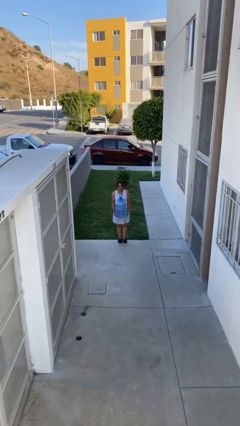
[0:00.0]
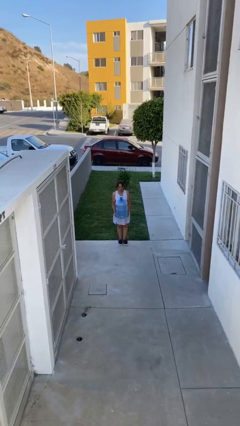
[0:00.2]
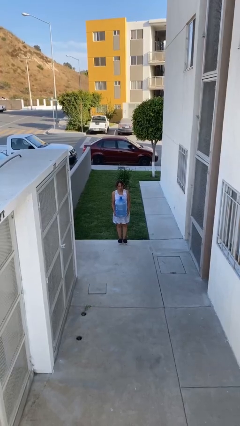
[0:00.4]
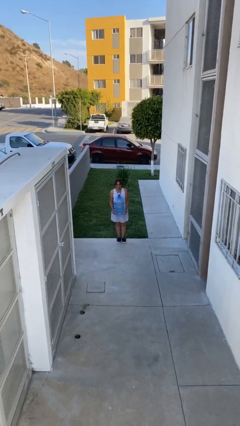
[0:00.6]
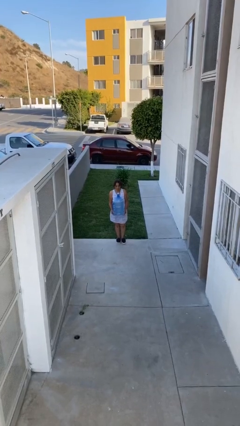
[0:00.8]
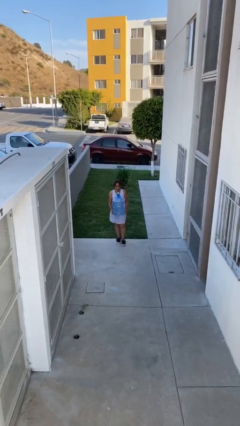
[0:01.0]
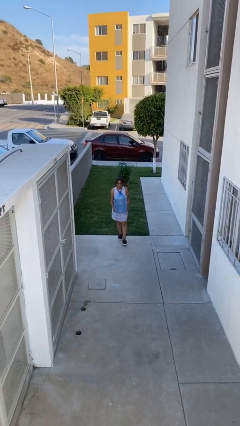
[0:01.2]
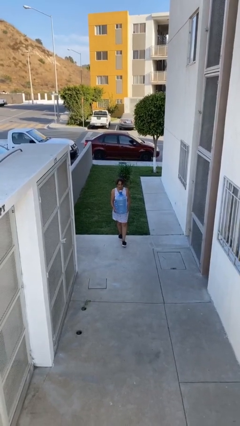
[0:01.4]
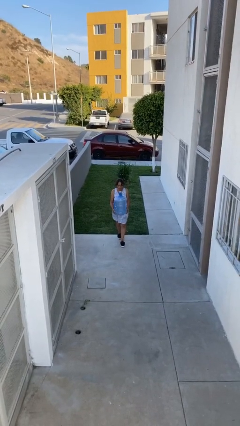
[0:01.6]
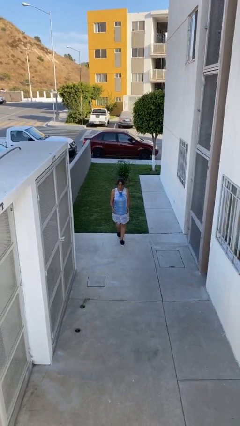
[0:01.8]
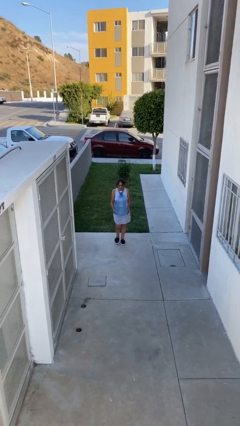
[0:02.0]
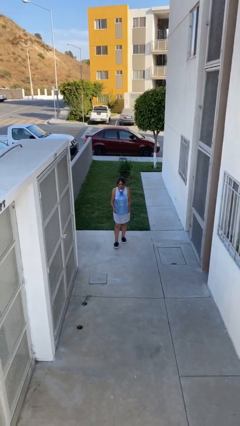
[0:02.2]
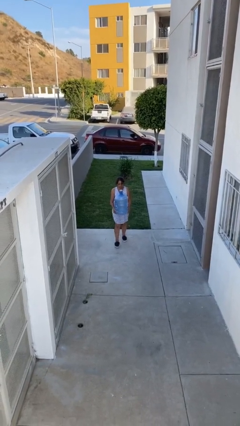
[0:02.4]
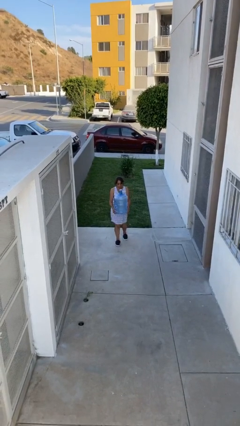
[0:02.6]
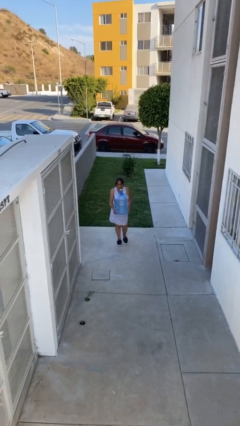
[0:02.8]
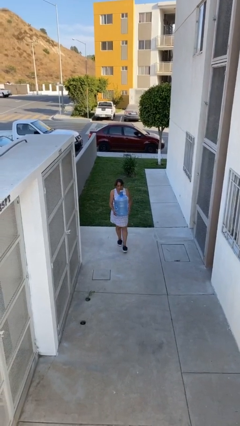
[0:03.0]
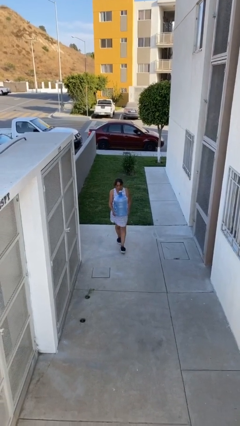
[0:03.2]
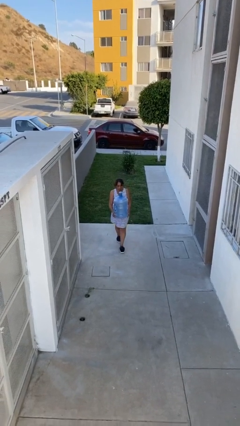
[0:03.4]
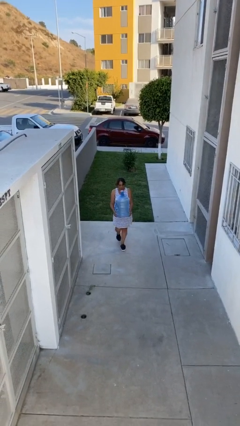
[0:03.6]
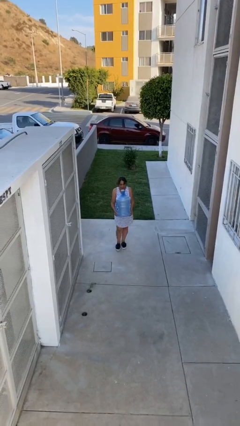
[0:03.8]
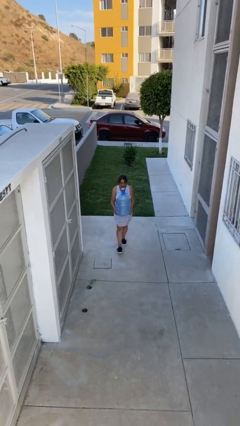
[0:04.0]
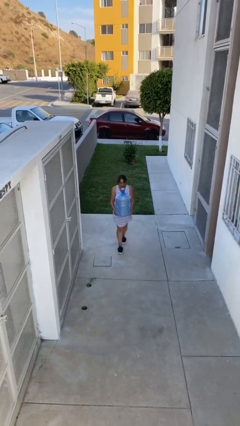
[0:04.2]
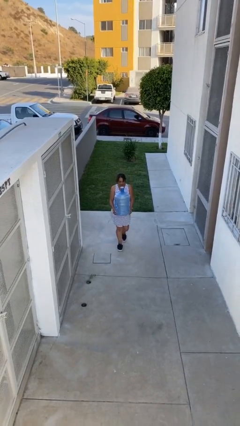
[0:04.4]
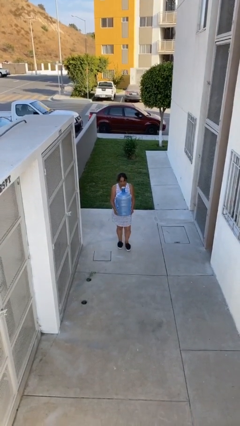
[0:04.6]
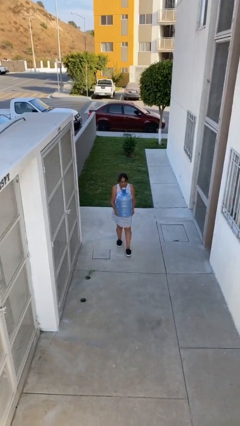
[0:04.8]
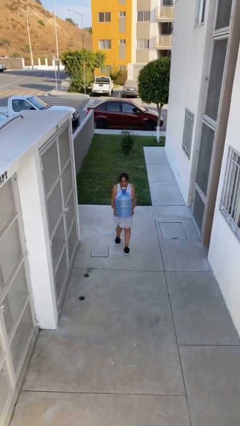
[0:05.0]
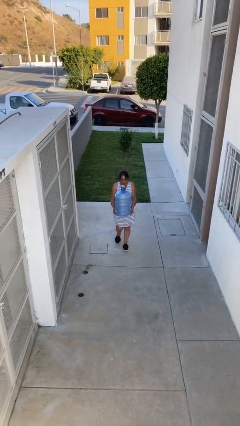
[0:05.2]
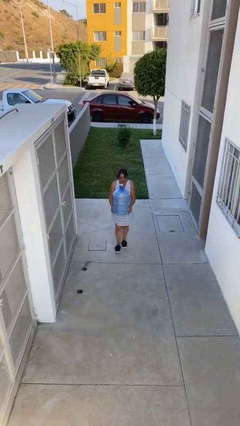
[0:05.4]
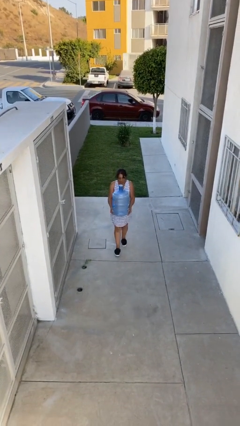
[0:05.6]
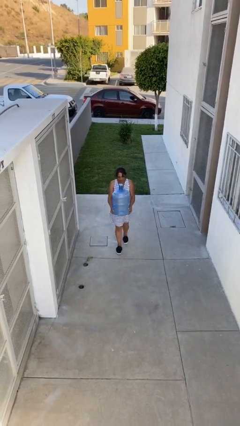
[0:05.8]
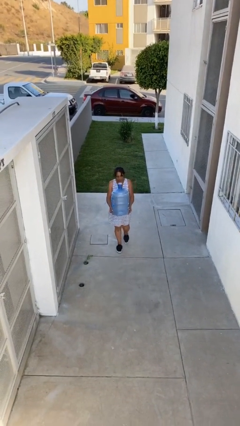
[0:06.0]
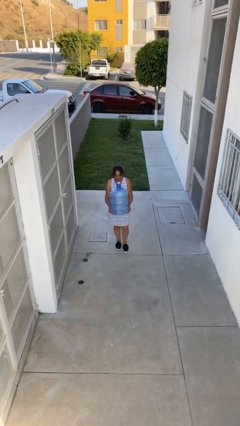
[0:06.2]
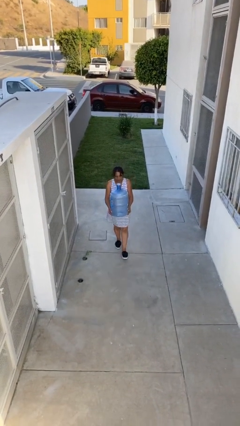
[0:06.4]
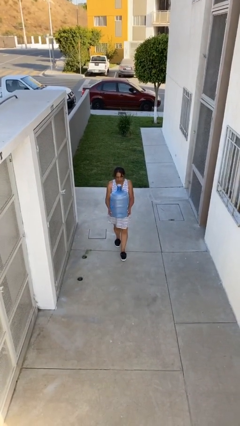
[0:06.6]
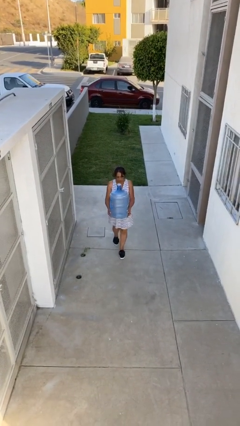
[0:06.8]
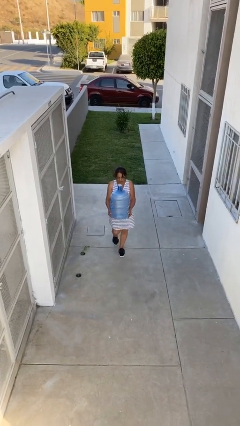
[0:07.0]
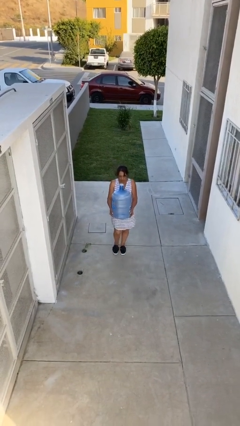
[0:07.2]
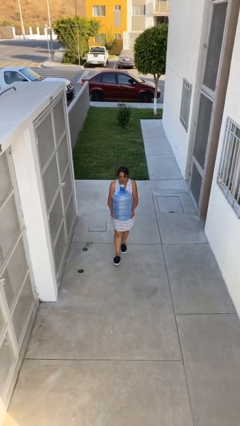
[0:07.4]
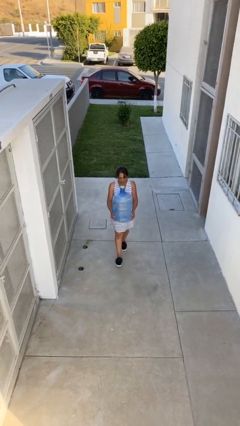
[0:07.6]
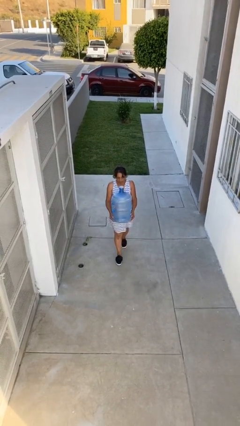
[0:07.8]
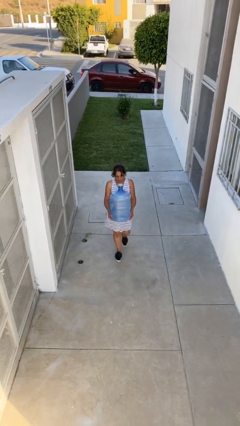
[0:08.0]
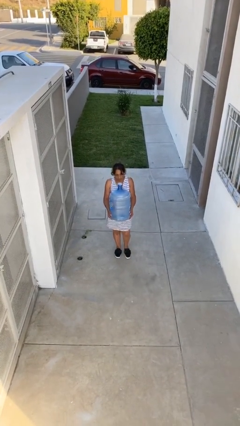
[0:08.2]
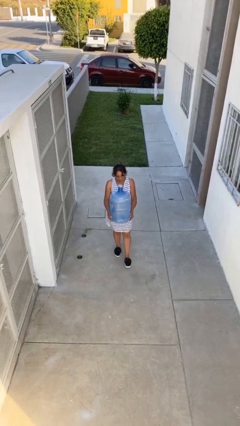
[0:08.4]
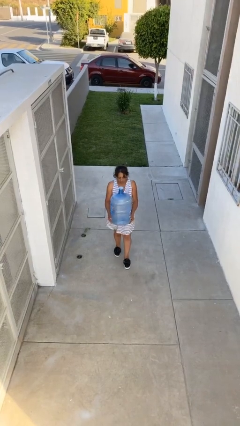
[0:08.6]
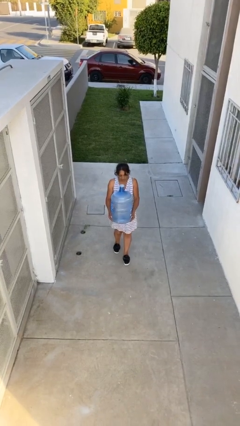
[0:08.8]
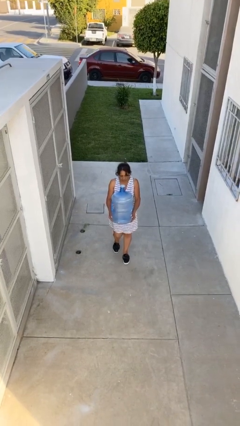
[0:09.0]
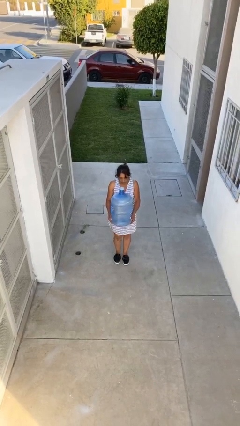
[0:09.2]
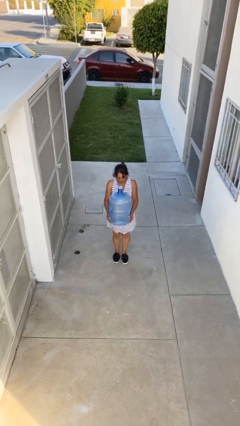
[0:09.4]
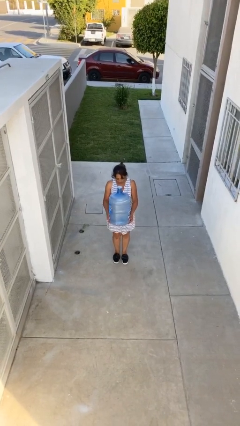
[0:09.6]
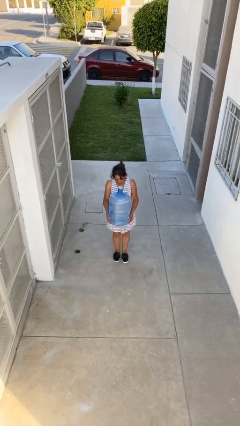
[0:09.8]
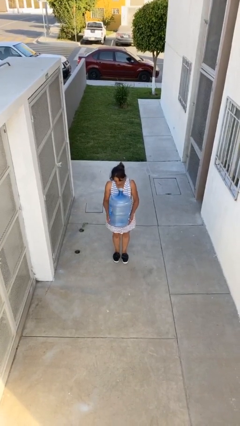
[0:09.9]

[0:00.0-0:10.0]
person carries heavy object

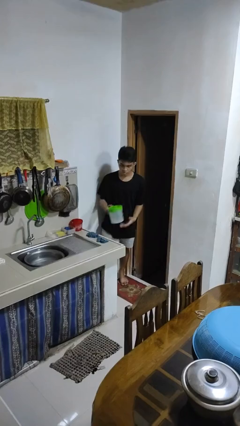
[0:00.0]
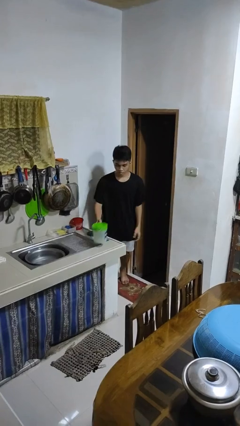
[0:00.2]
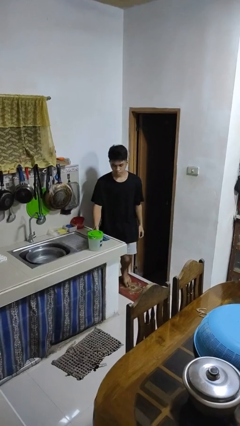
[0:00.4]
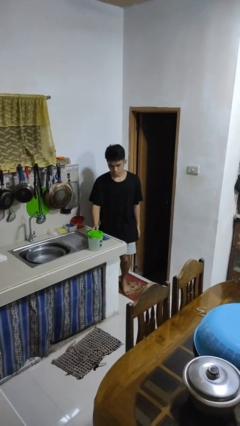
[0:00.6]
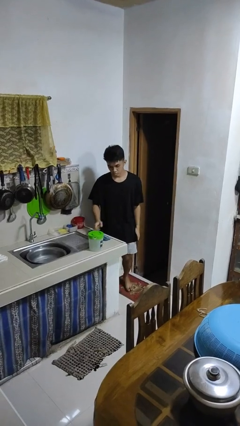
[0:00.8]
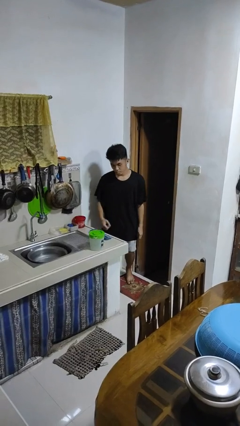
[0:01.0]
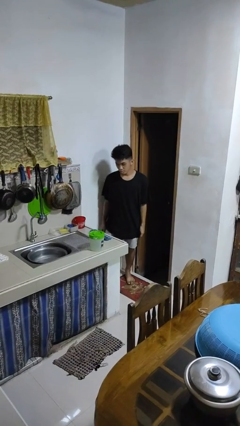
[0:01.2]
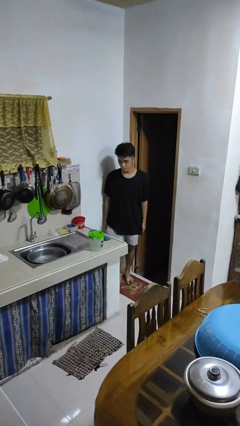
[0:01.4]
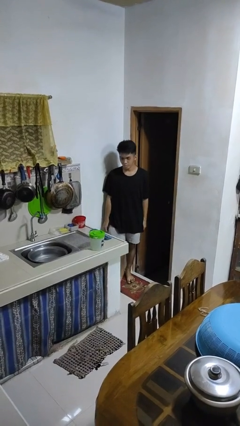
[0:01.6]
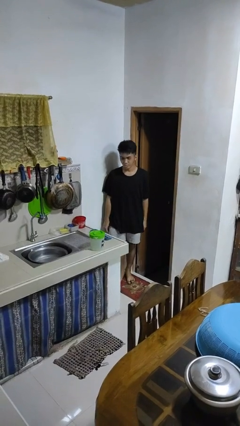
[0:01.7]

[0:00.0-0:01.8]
person puts down object on countertop

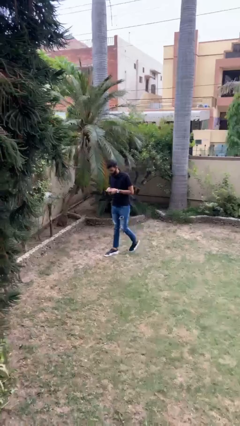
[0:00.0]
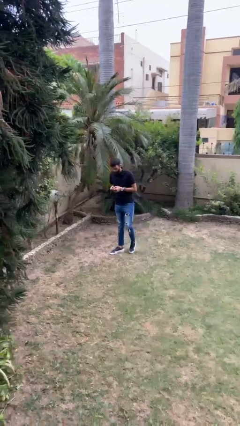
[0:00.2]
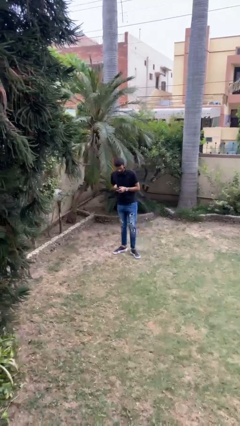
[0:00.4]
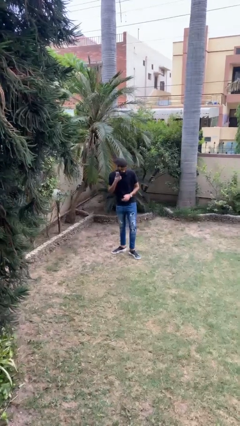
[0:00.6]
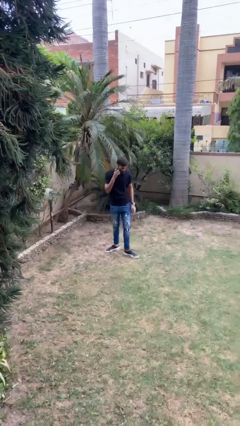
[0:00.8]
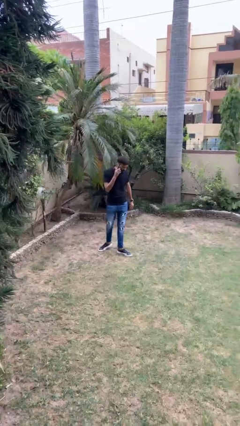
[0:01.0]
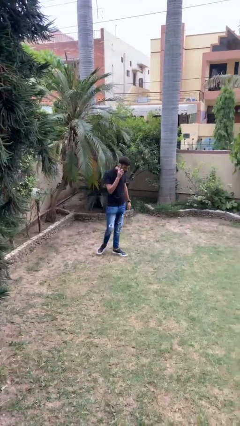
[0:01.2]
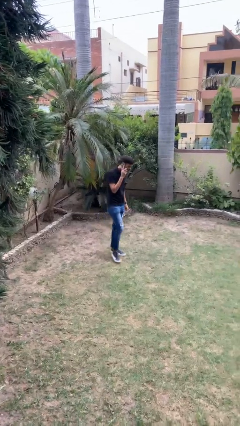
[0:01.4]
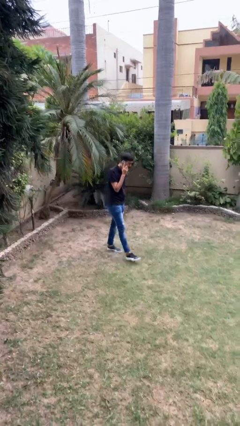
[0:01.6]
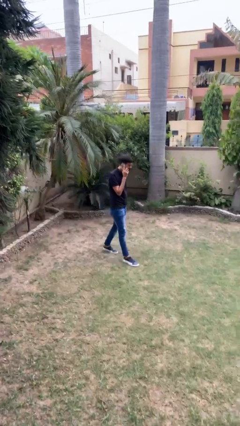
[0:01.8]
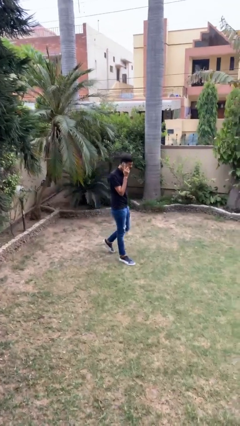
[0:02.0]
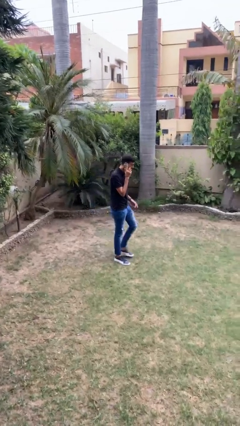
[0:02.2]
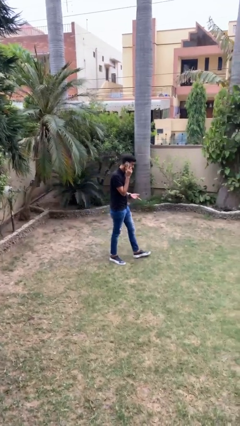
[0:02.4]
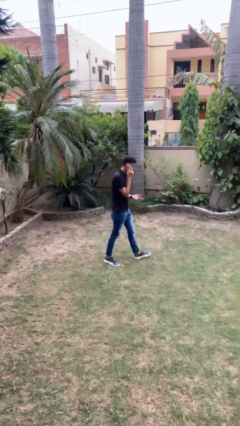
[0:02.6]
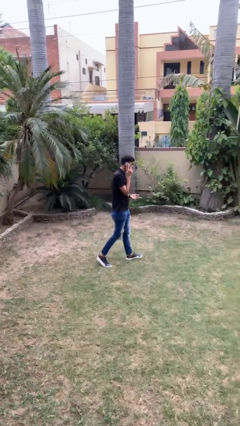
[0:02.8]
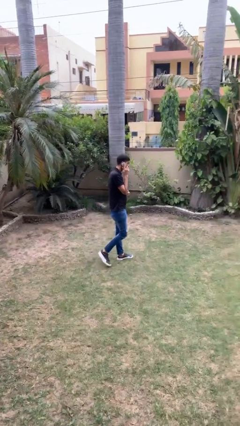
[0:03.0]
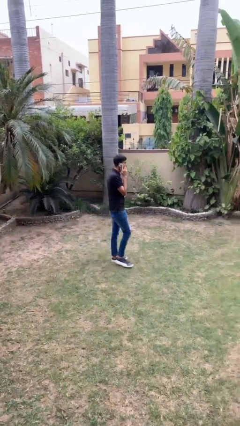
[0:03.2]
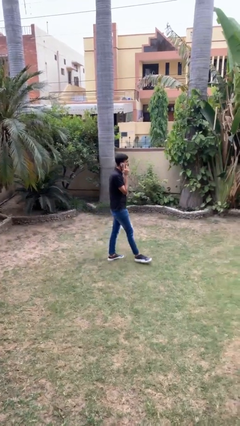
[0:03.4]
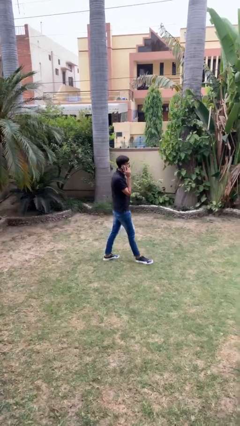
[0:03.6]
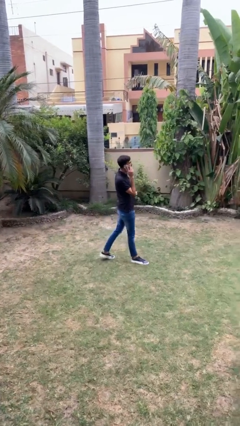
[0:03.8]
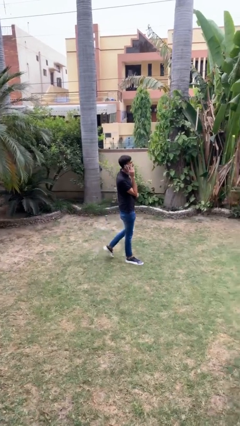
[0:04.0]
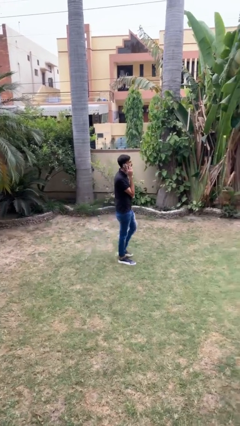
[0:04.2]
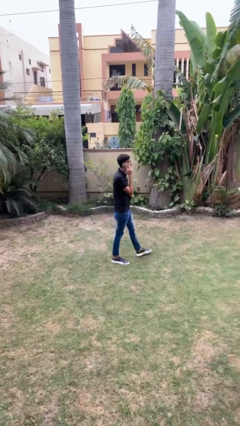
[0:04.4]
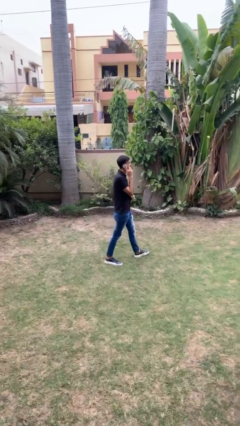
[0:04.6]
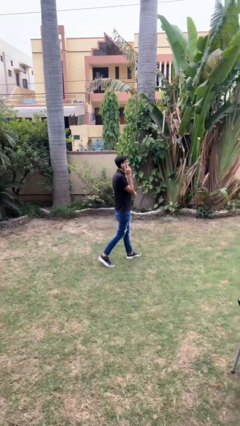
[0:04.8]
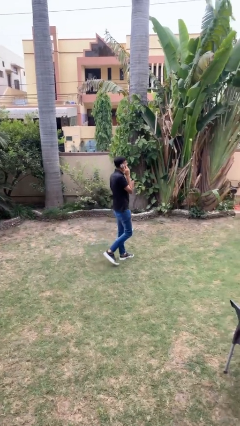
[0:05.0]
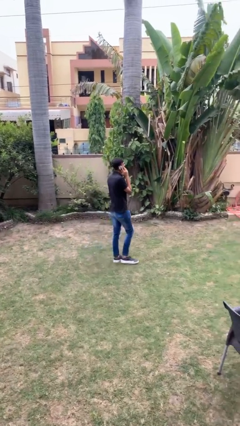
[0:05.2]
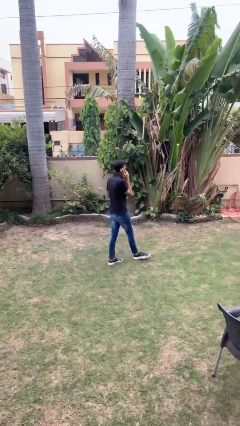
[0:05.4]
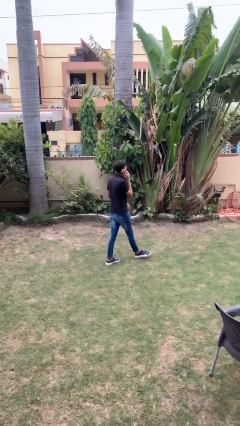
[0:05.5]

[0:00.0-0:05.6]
person talks on phone

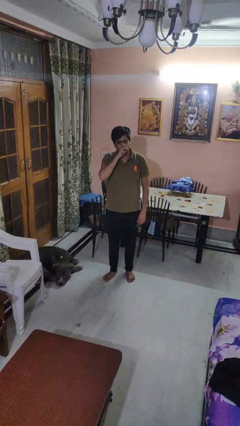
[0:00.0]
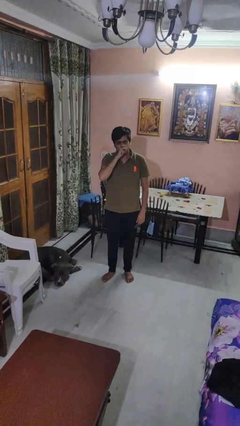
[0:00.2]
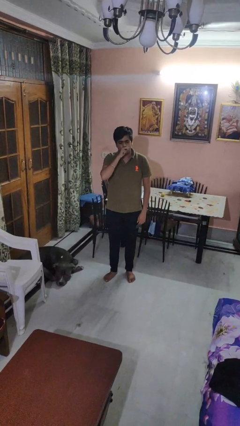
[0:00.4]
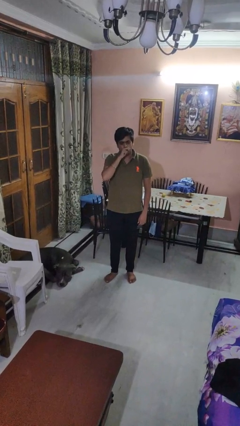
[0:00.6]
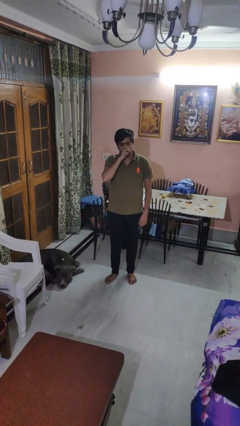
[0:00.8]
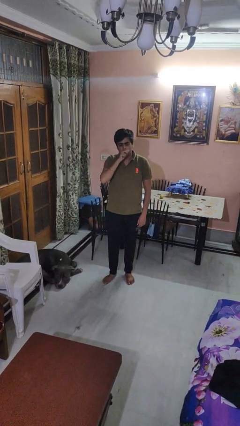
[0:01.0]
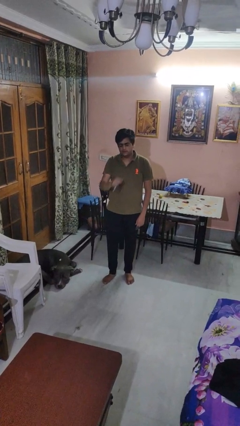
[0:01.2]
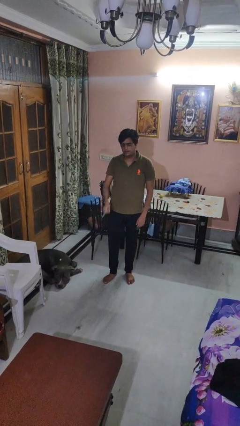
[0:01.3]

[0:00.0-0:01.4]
person vapes
